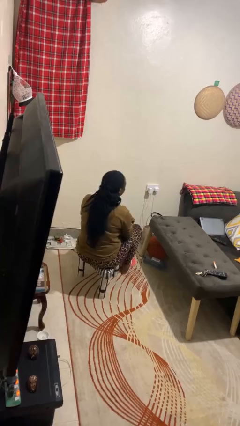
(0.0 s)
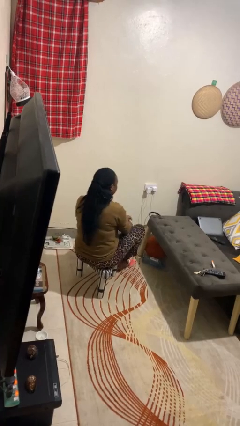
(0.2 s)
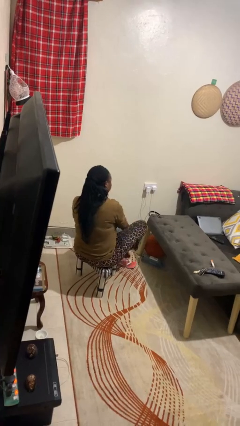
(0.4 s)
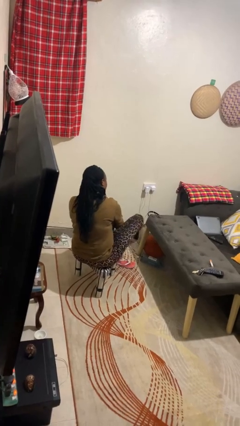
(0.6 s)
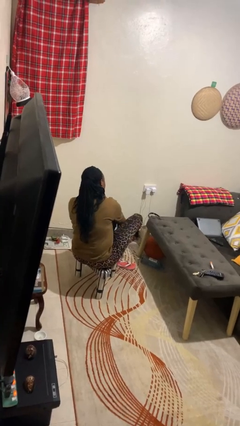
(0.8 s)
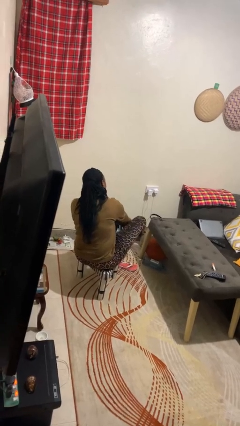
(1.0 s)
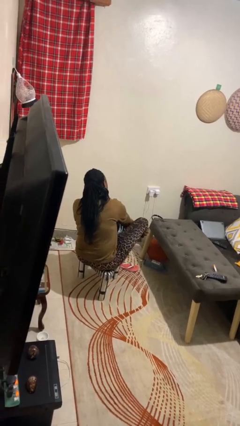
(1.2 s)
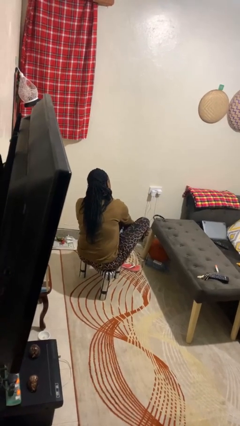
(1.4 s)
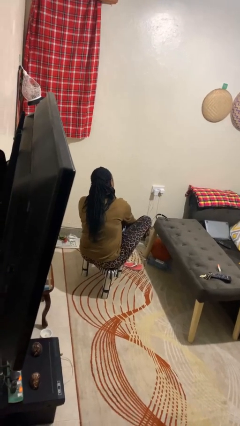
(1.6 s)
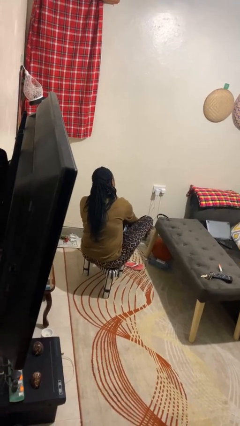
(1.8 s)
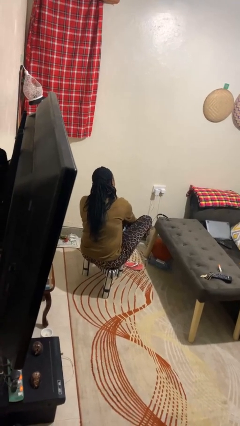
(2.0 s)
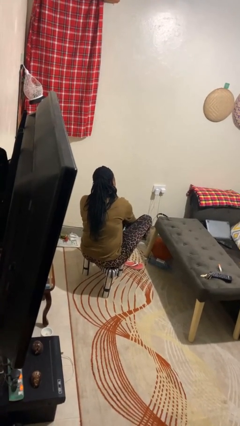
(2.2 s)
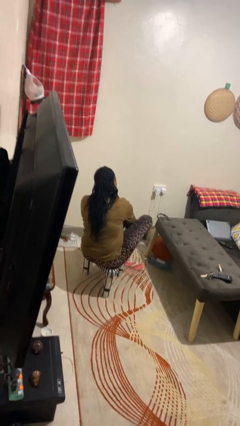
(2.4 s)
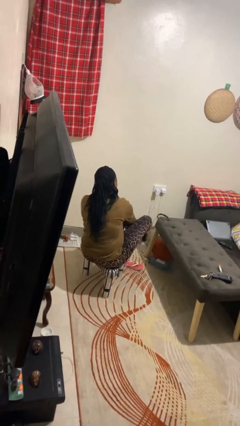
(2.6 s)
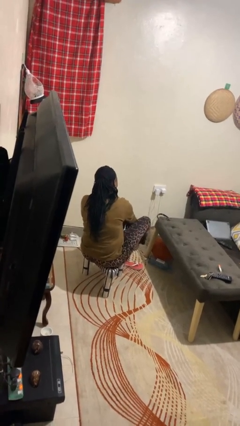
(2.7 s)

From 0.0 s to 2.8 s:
person rubs foot

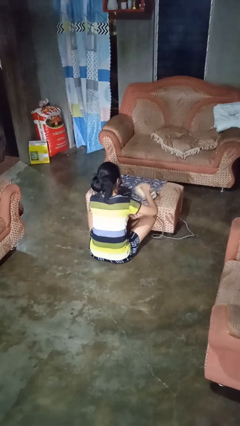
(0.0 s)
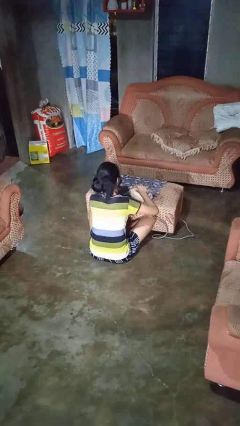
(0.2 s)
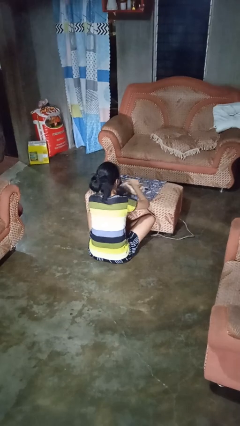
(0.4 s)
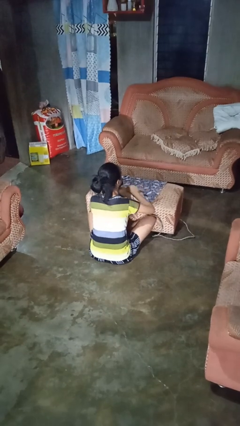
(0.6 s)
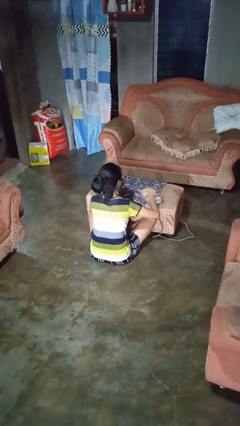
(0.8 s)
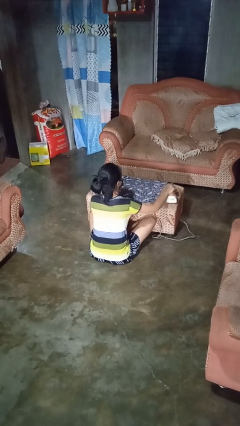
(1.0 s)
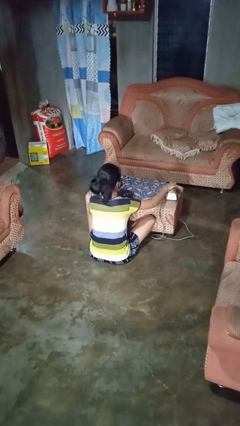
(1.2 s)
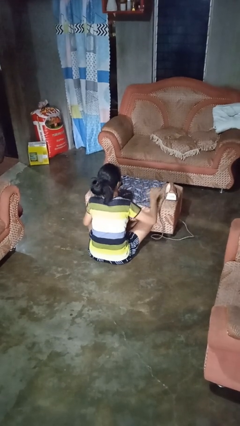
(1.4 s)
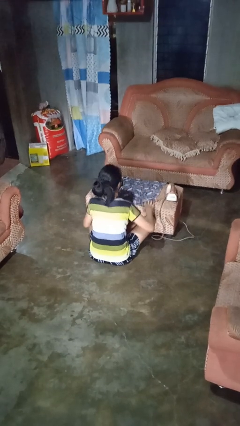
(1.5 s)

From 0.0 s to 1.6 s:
person irons clothes

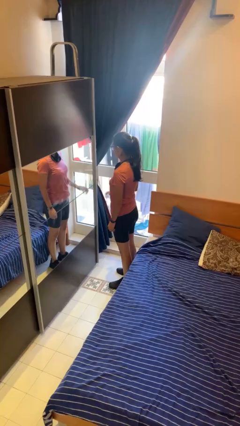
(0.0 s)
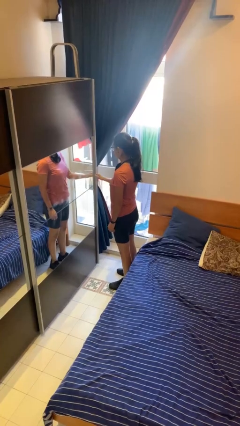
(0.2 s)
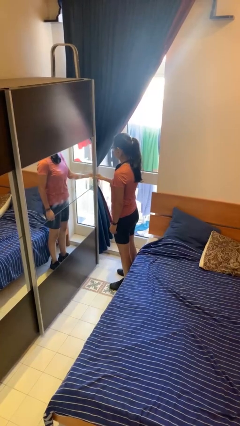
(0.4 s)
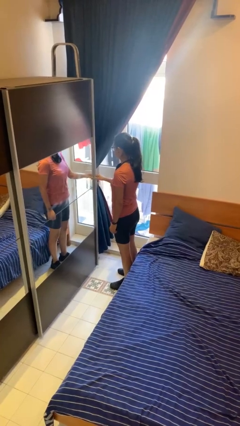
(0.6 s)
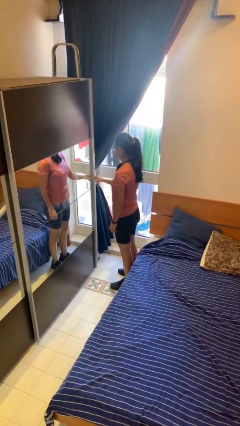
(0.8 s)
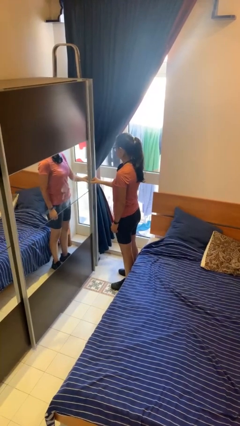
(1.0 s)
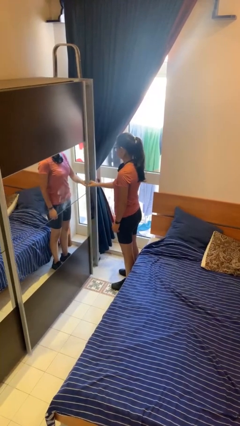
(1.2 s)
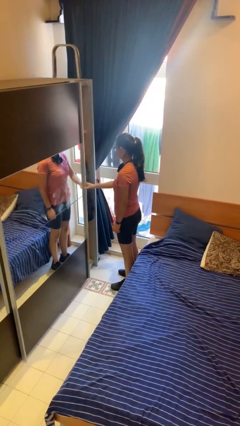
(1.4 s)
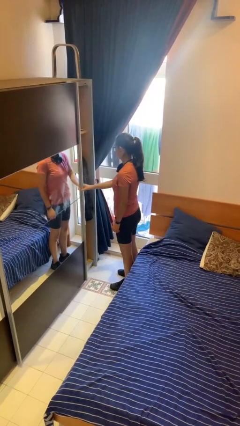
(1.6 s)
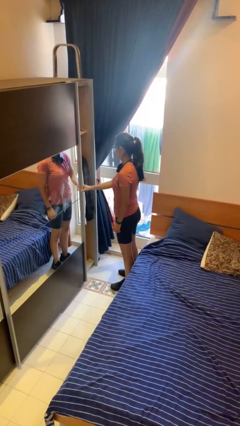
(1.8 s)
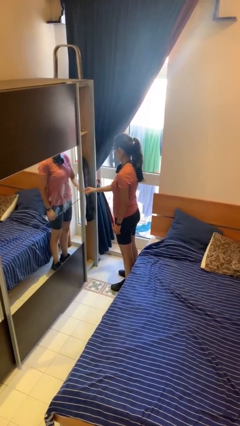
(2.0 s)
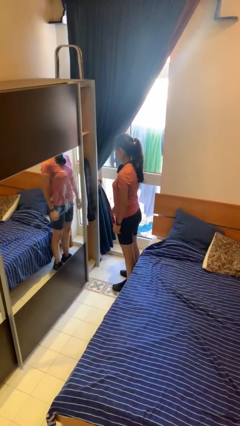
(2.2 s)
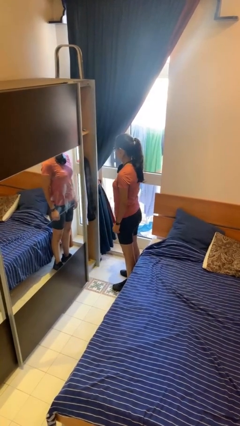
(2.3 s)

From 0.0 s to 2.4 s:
person opens closet door

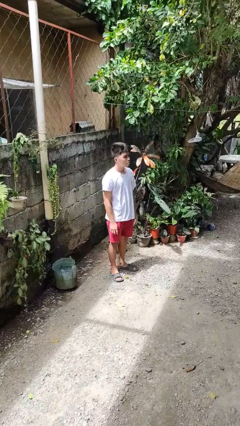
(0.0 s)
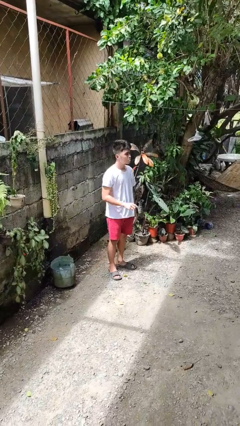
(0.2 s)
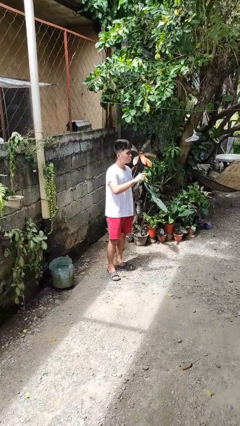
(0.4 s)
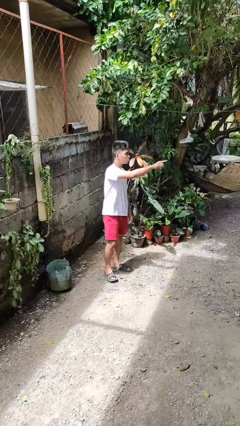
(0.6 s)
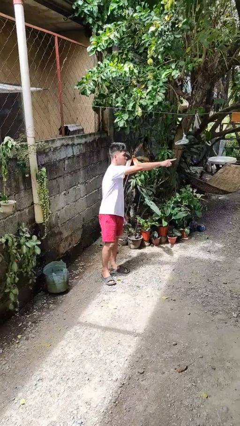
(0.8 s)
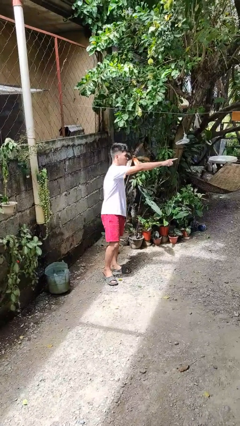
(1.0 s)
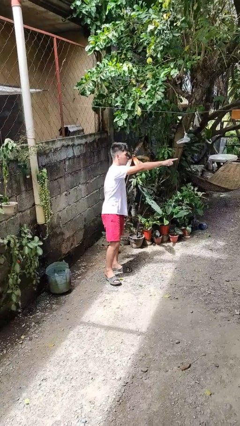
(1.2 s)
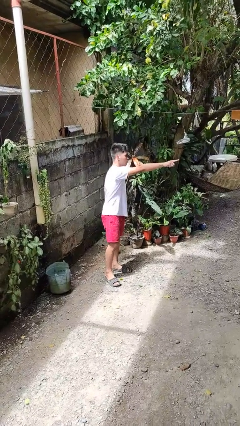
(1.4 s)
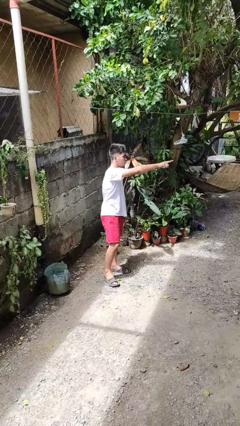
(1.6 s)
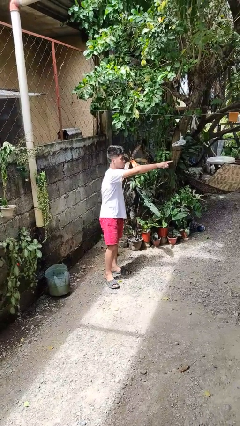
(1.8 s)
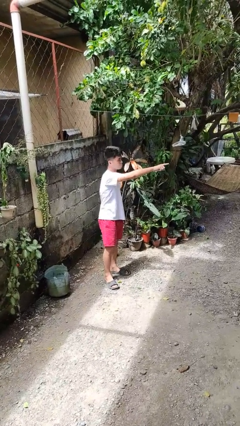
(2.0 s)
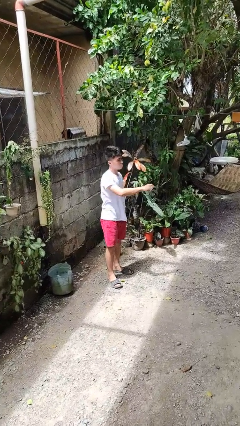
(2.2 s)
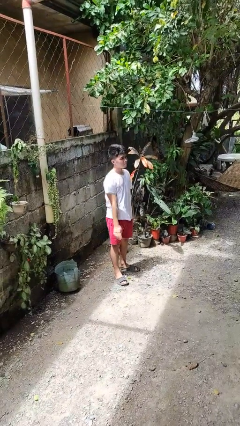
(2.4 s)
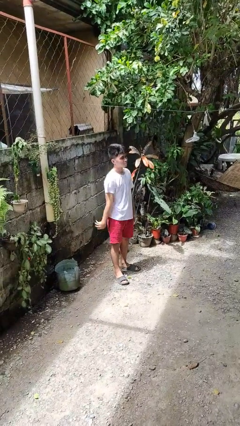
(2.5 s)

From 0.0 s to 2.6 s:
person points at person

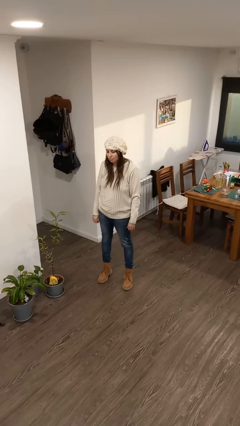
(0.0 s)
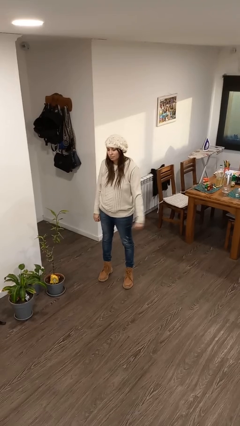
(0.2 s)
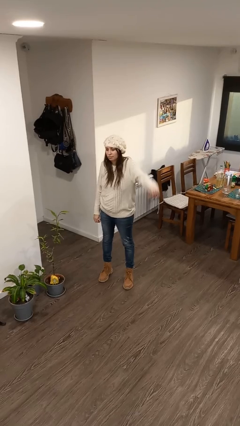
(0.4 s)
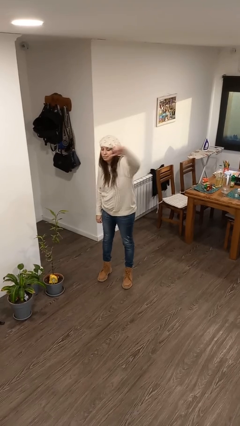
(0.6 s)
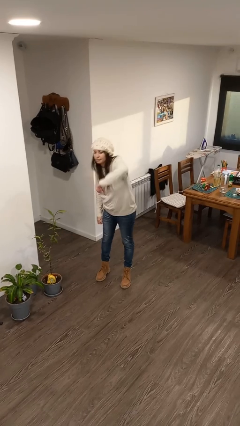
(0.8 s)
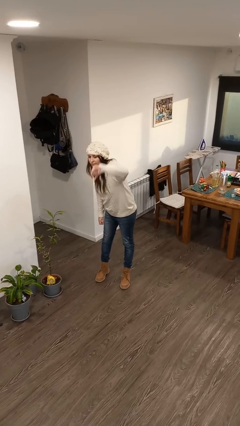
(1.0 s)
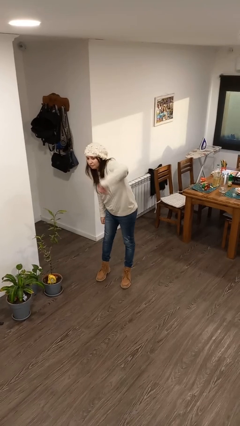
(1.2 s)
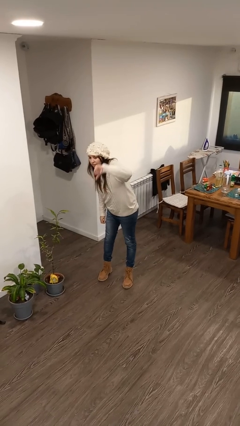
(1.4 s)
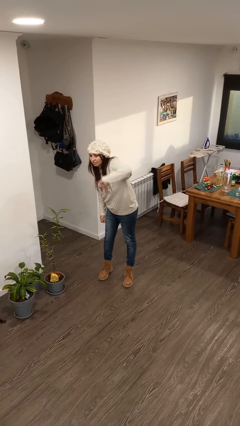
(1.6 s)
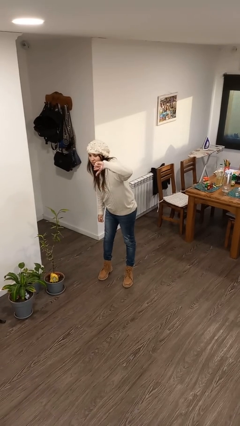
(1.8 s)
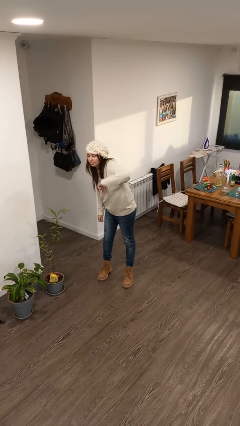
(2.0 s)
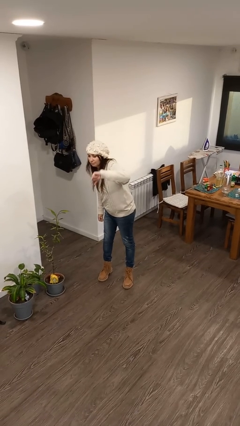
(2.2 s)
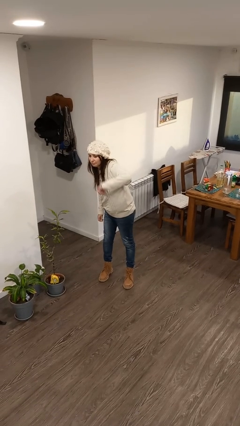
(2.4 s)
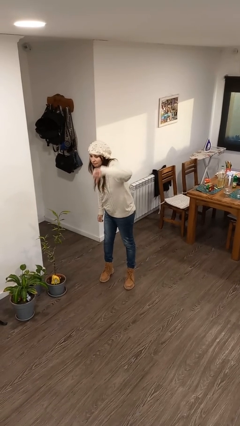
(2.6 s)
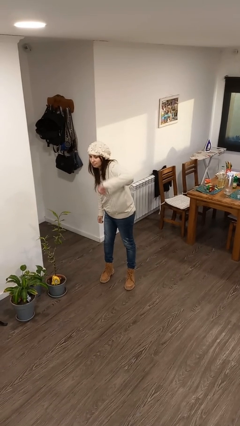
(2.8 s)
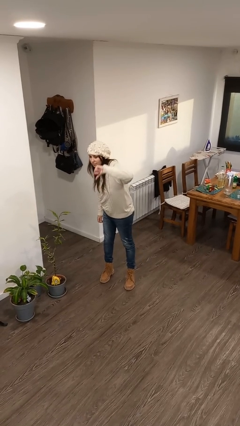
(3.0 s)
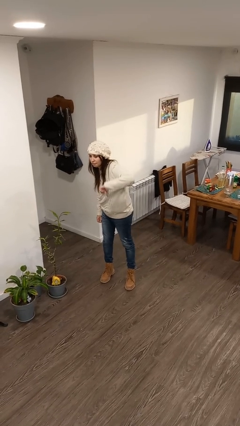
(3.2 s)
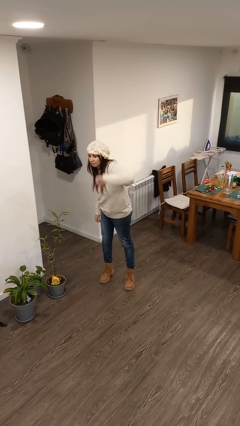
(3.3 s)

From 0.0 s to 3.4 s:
person gestures thumbs down

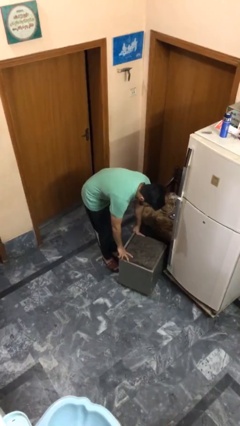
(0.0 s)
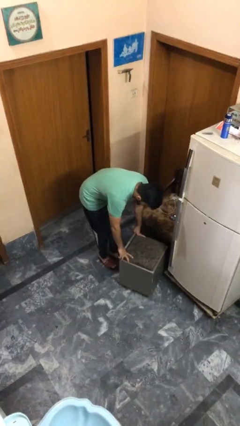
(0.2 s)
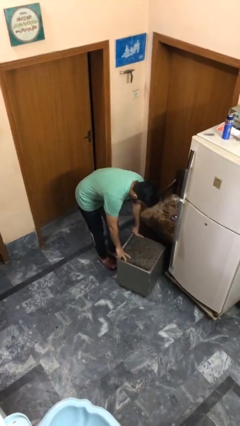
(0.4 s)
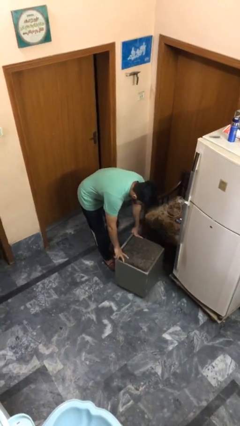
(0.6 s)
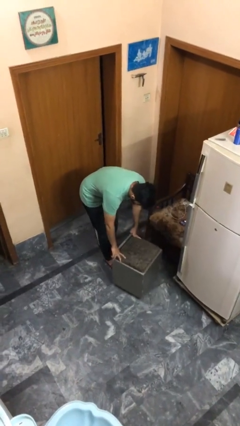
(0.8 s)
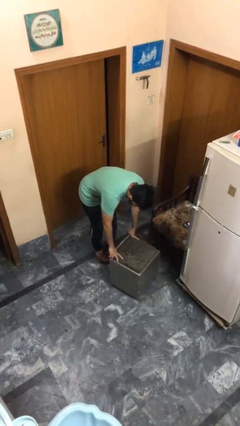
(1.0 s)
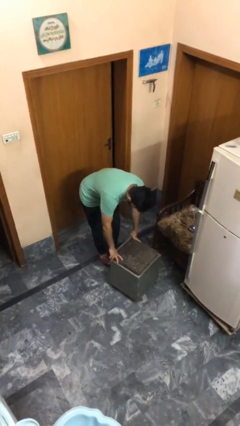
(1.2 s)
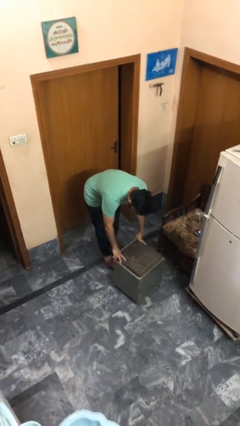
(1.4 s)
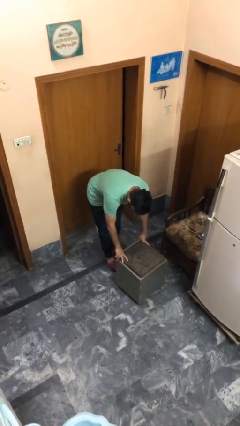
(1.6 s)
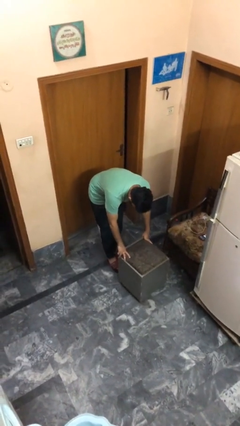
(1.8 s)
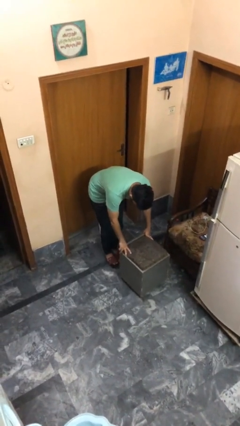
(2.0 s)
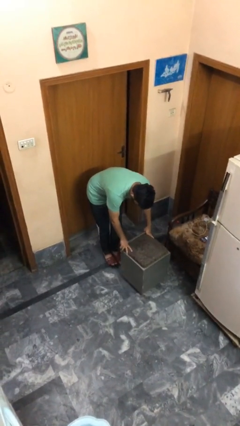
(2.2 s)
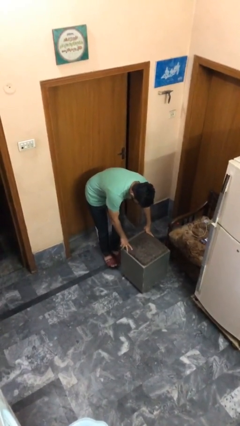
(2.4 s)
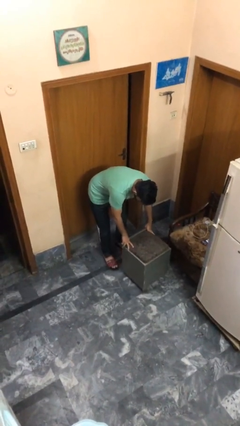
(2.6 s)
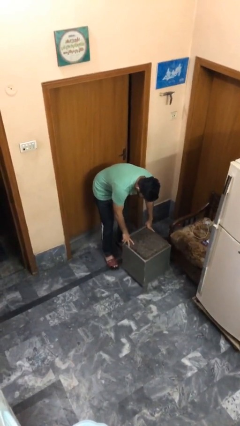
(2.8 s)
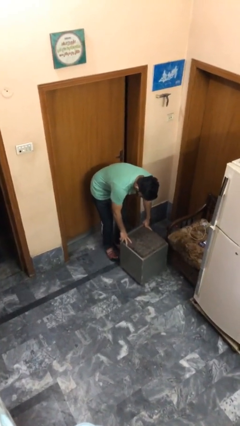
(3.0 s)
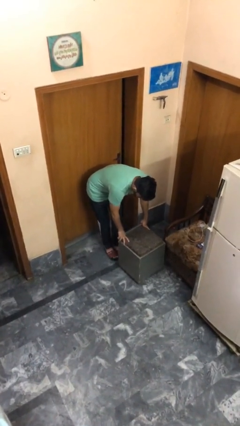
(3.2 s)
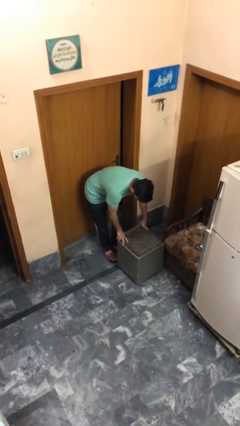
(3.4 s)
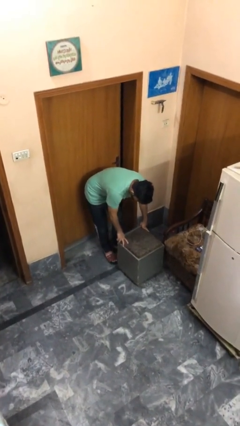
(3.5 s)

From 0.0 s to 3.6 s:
person pulls wheeled cart

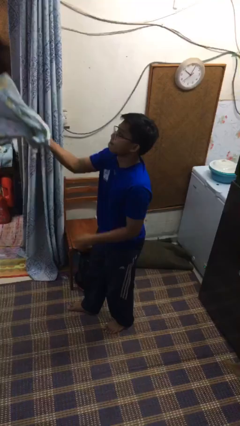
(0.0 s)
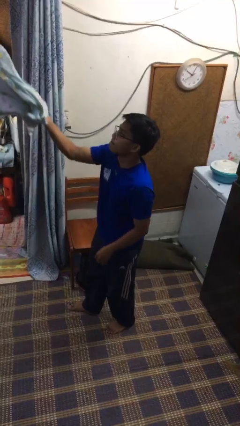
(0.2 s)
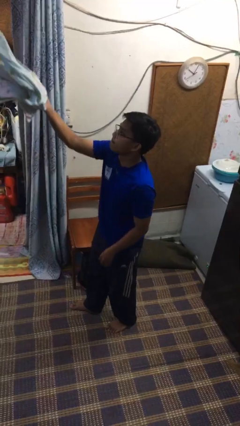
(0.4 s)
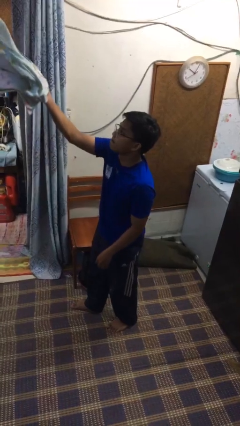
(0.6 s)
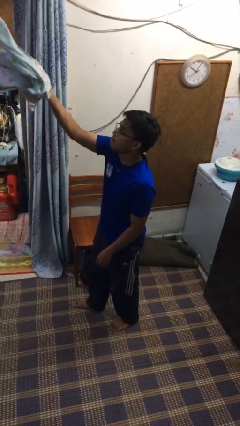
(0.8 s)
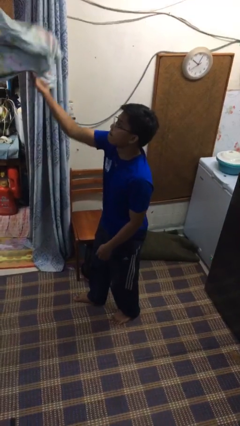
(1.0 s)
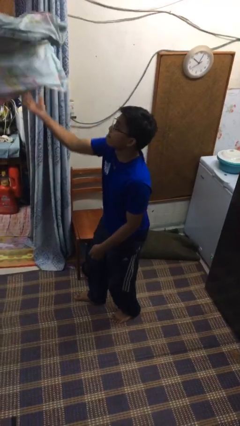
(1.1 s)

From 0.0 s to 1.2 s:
person drops object
